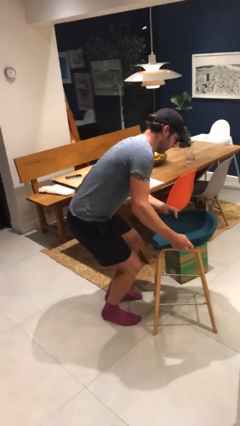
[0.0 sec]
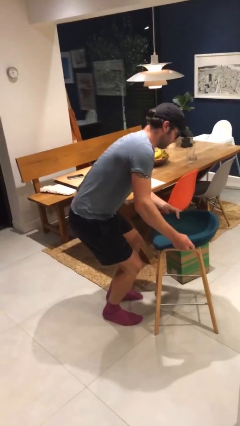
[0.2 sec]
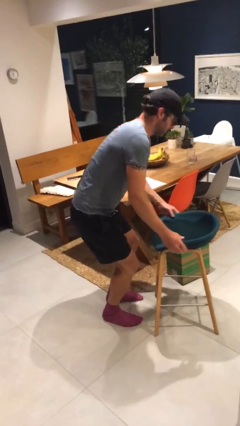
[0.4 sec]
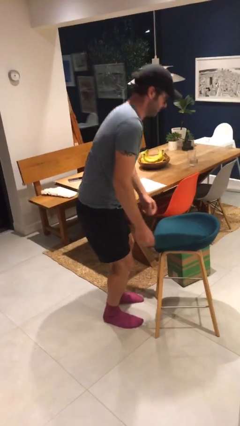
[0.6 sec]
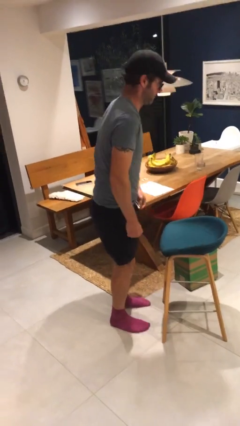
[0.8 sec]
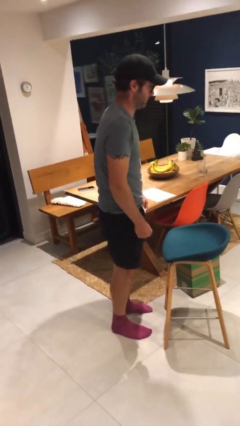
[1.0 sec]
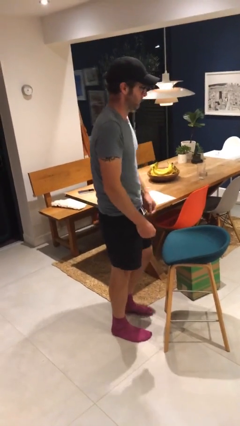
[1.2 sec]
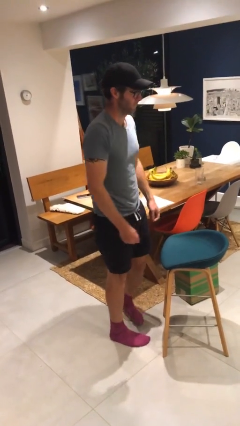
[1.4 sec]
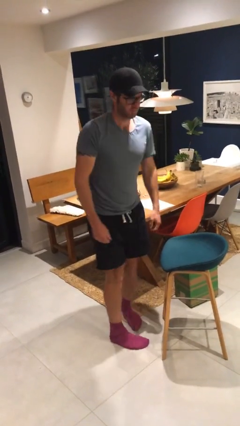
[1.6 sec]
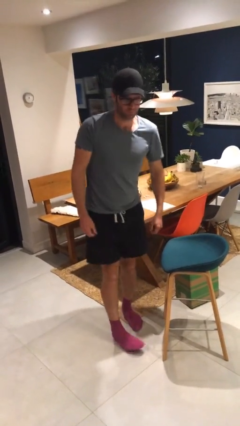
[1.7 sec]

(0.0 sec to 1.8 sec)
person puts down object on floor

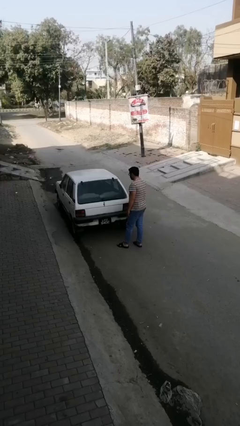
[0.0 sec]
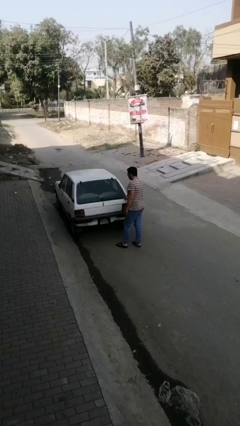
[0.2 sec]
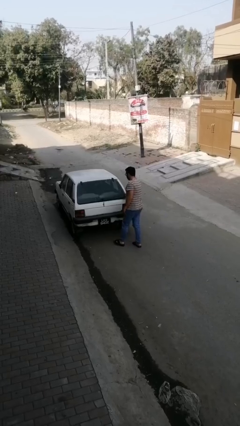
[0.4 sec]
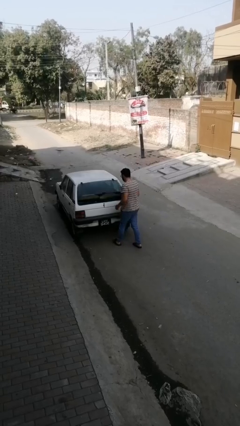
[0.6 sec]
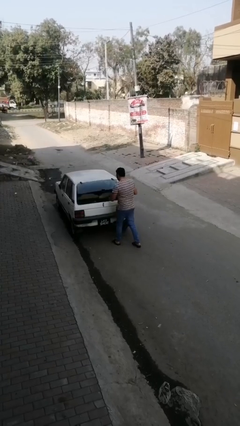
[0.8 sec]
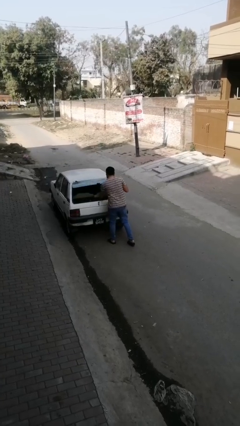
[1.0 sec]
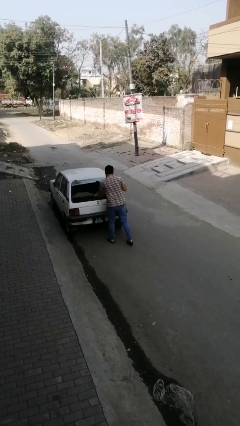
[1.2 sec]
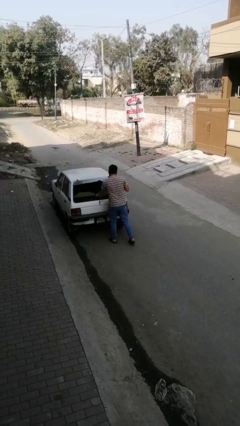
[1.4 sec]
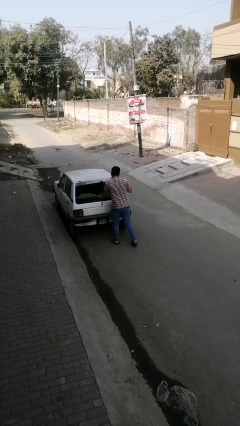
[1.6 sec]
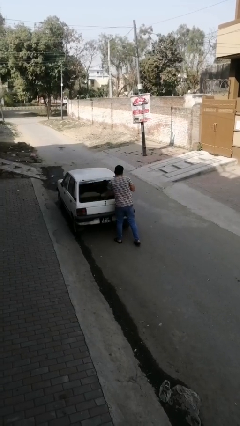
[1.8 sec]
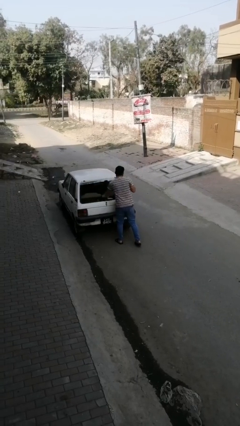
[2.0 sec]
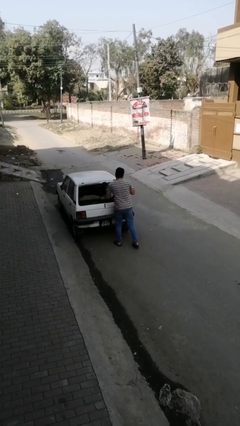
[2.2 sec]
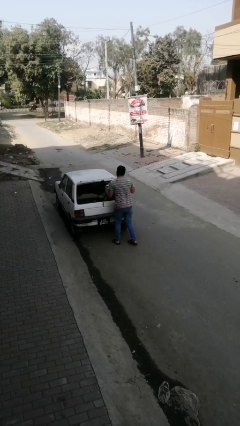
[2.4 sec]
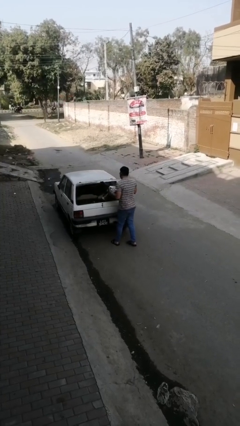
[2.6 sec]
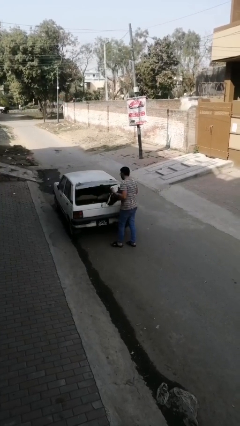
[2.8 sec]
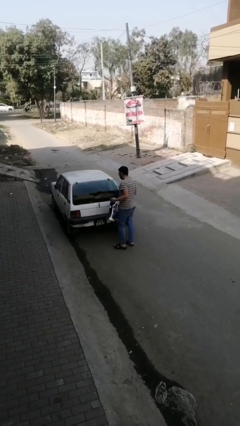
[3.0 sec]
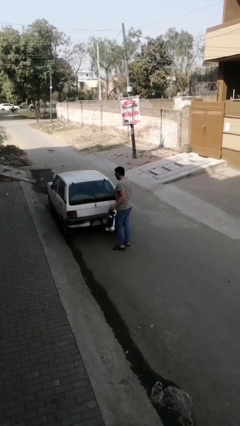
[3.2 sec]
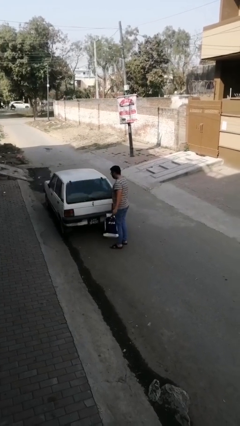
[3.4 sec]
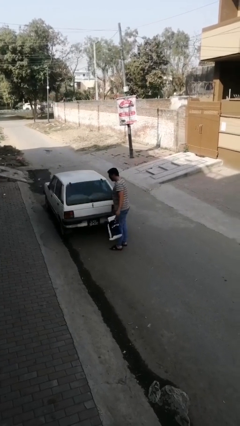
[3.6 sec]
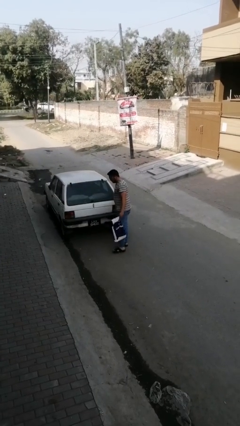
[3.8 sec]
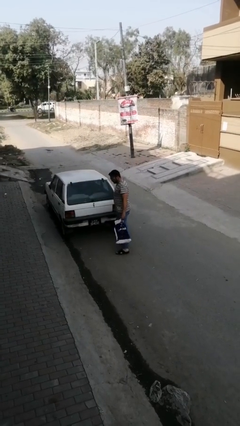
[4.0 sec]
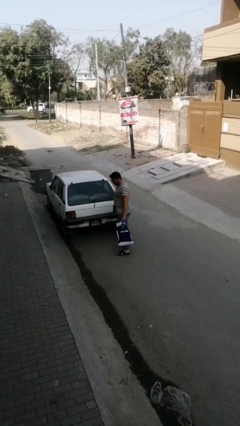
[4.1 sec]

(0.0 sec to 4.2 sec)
person unloads car

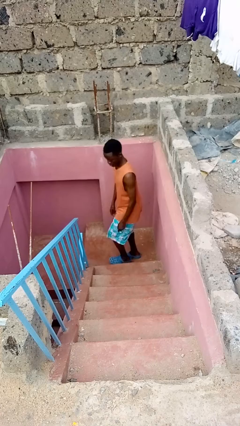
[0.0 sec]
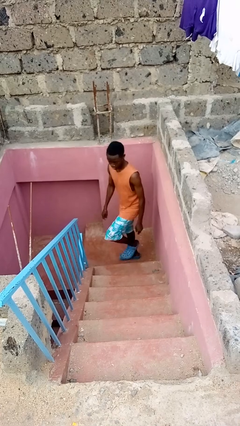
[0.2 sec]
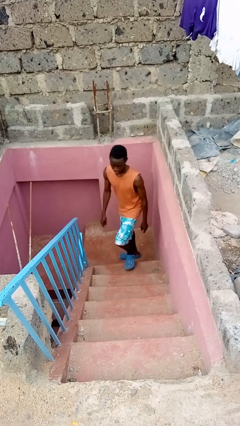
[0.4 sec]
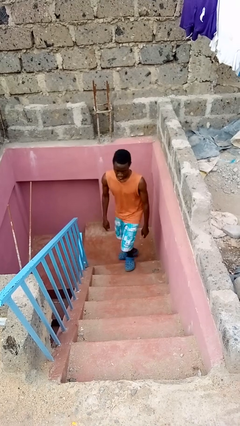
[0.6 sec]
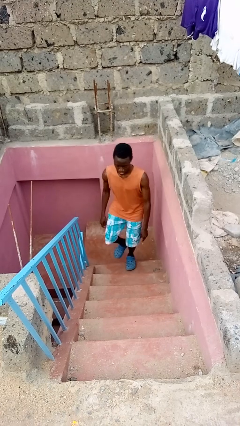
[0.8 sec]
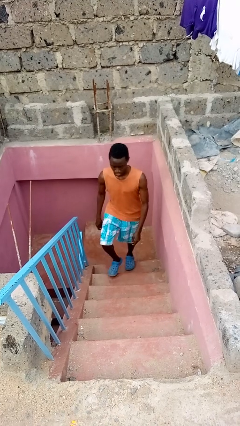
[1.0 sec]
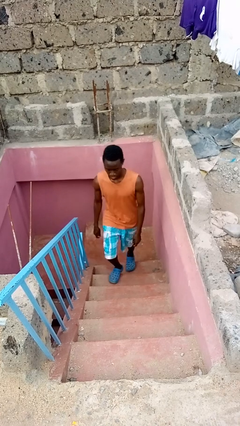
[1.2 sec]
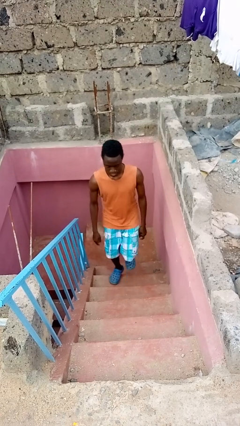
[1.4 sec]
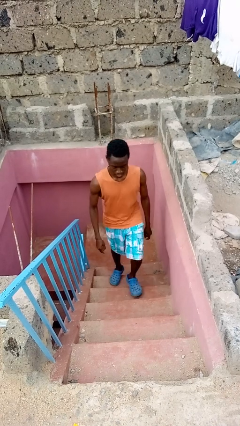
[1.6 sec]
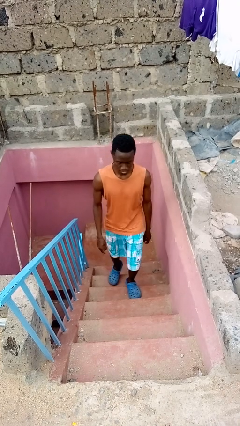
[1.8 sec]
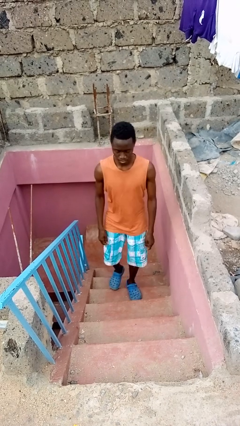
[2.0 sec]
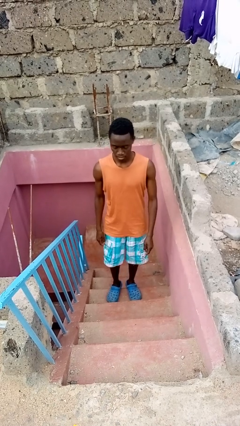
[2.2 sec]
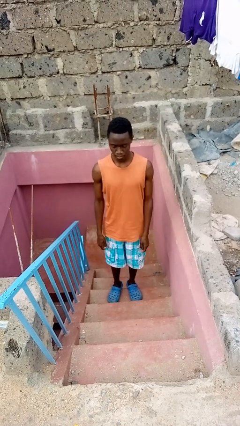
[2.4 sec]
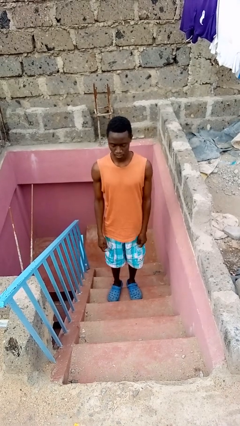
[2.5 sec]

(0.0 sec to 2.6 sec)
person climbs up stairs

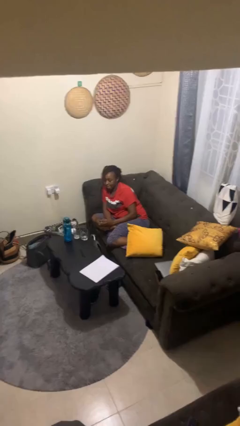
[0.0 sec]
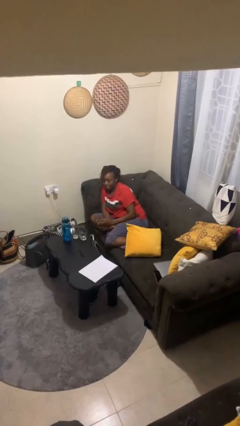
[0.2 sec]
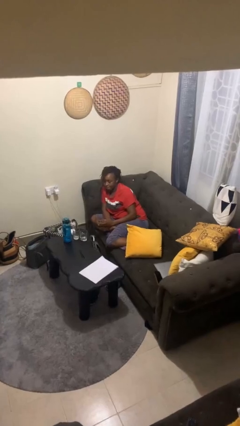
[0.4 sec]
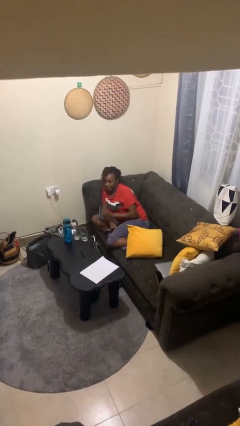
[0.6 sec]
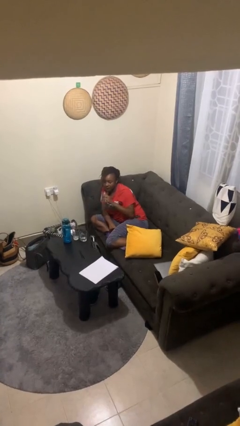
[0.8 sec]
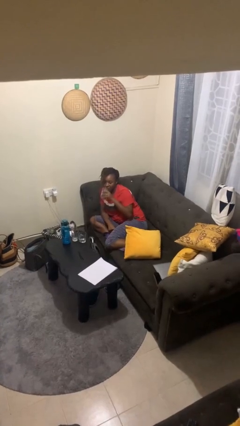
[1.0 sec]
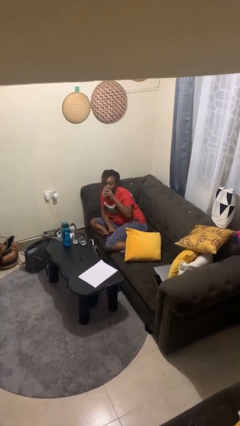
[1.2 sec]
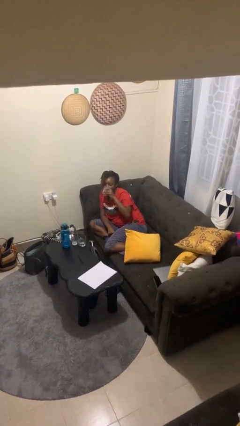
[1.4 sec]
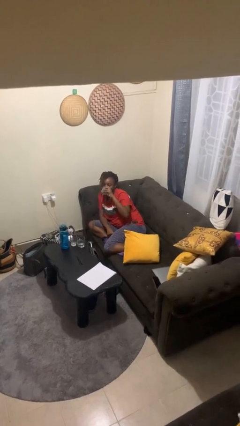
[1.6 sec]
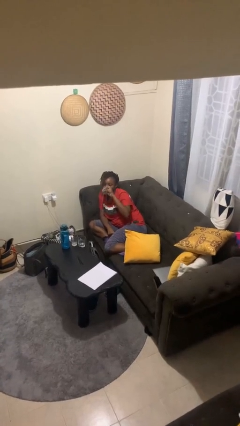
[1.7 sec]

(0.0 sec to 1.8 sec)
person drinks from shotglass

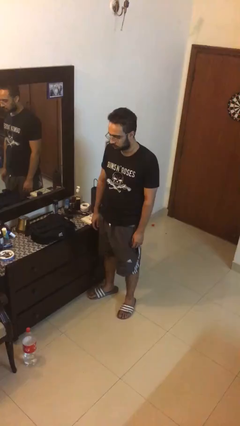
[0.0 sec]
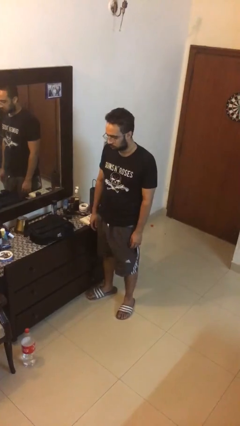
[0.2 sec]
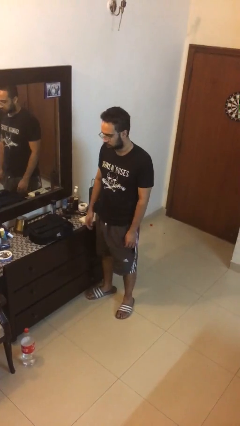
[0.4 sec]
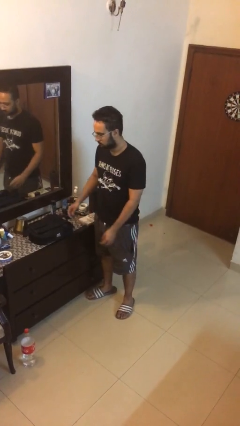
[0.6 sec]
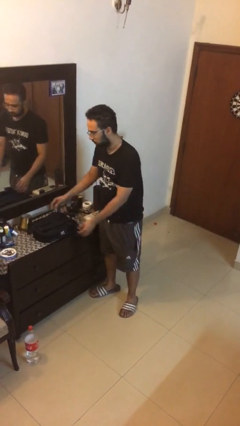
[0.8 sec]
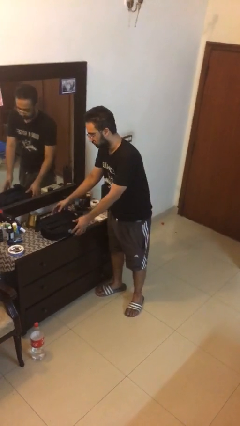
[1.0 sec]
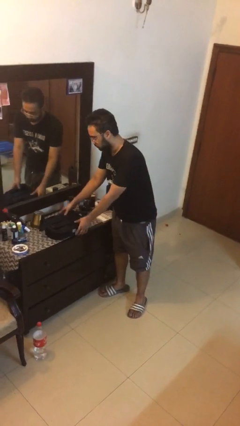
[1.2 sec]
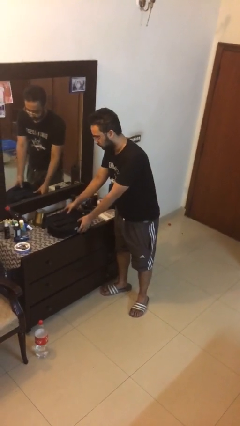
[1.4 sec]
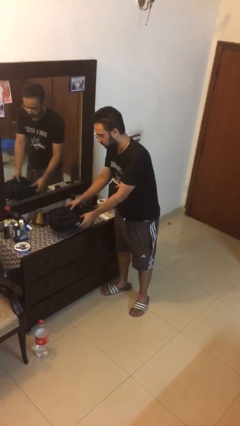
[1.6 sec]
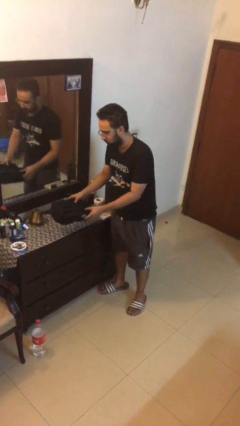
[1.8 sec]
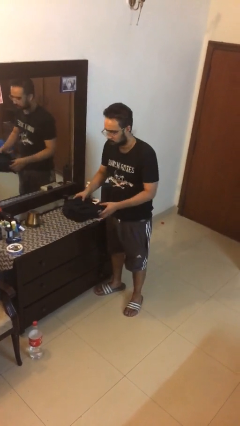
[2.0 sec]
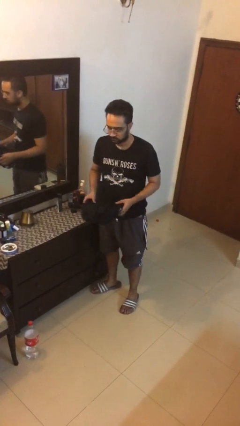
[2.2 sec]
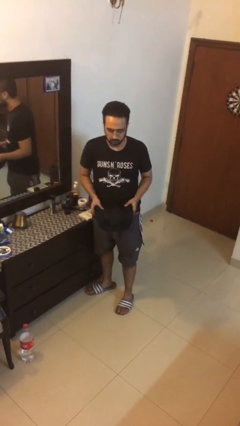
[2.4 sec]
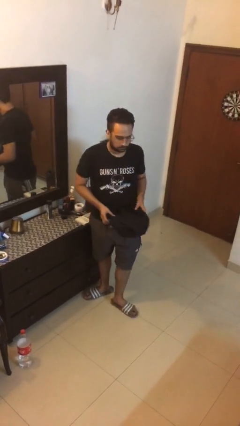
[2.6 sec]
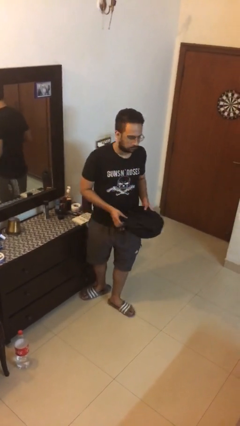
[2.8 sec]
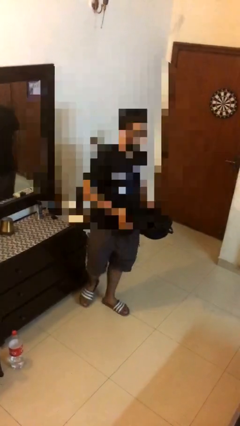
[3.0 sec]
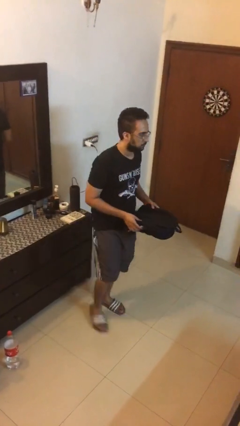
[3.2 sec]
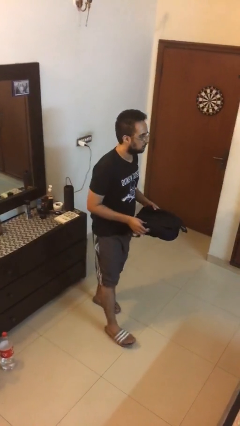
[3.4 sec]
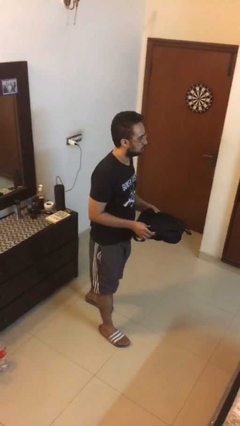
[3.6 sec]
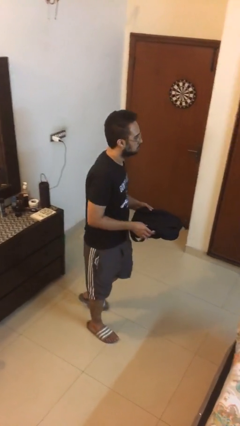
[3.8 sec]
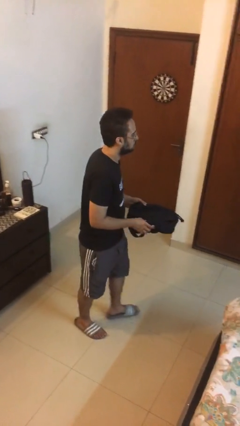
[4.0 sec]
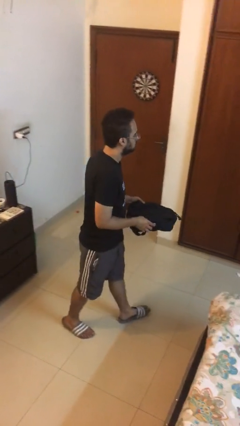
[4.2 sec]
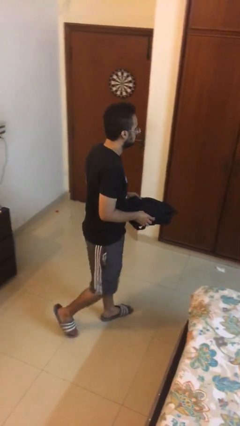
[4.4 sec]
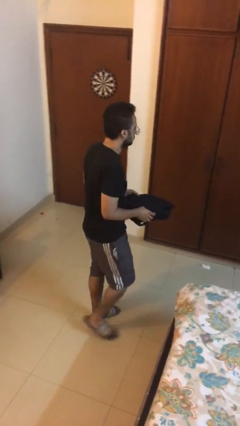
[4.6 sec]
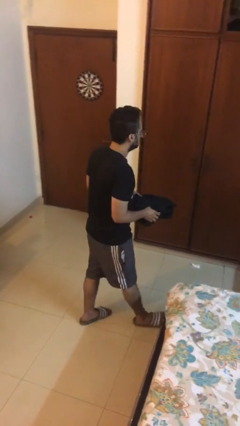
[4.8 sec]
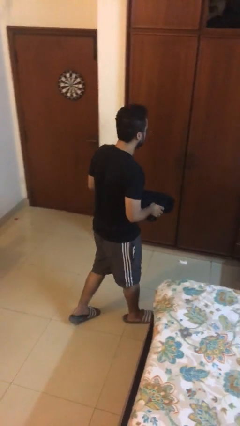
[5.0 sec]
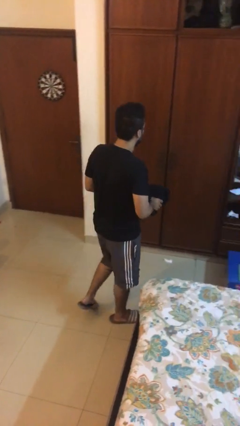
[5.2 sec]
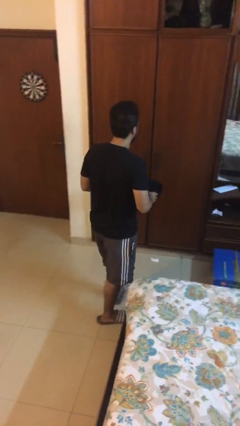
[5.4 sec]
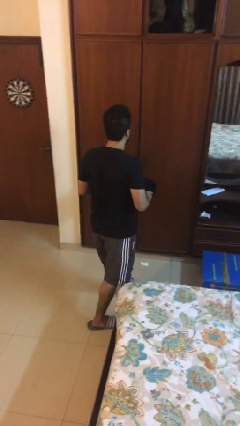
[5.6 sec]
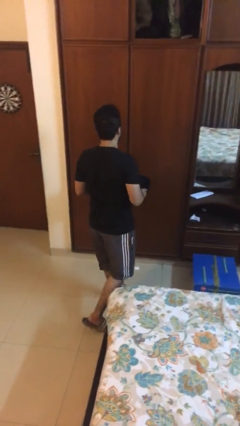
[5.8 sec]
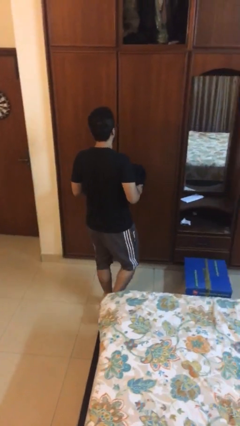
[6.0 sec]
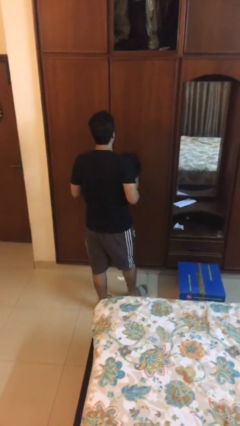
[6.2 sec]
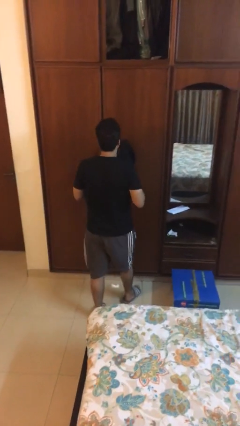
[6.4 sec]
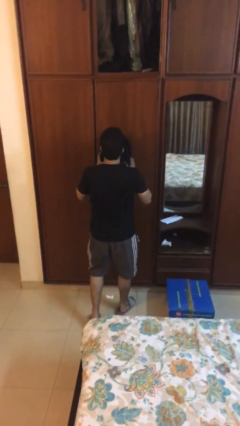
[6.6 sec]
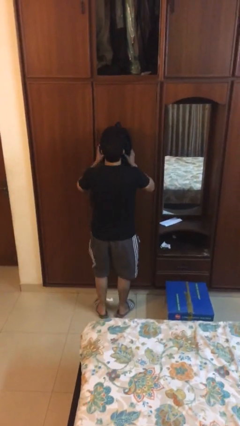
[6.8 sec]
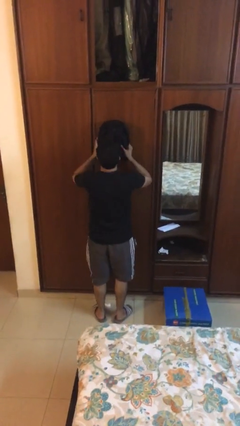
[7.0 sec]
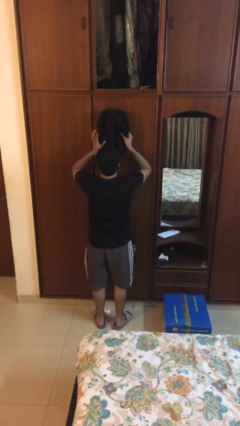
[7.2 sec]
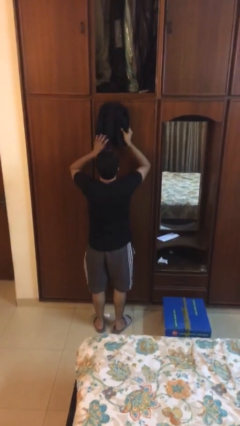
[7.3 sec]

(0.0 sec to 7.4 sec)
person picks up object from table
